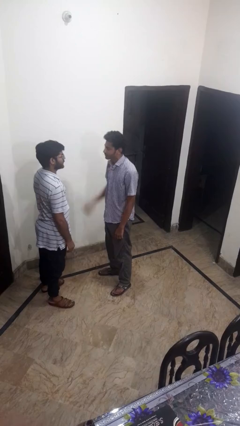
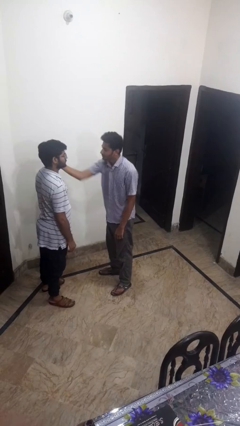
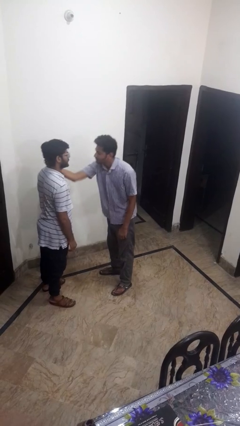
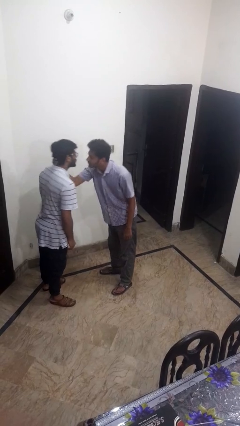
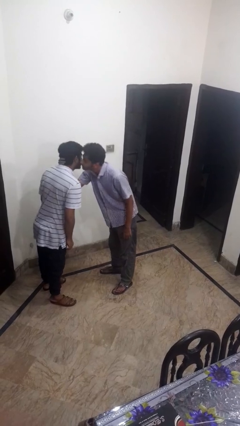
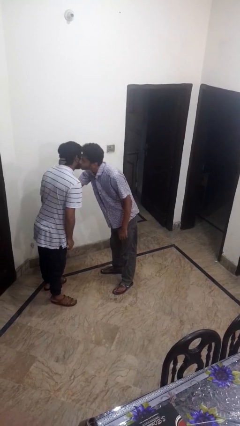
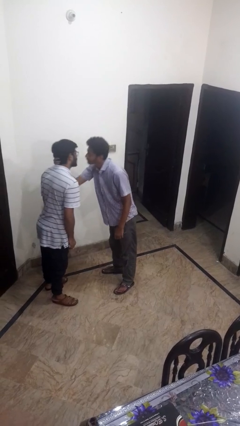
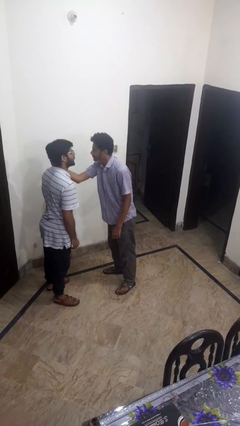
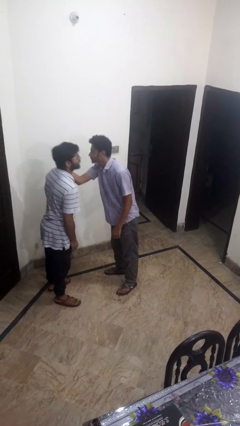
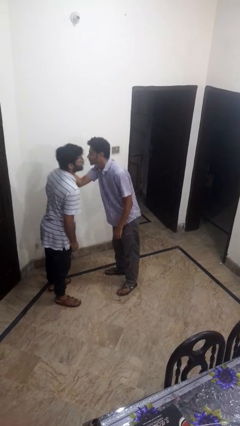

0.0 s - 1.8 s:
person grabs person by forearm

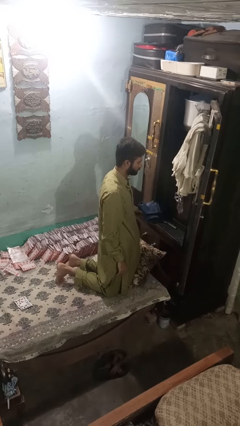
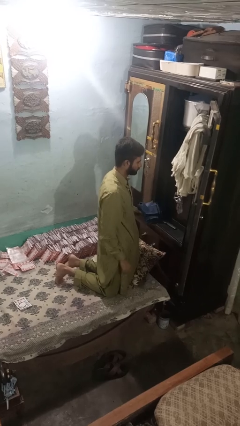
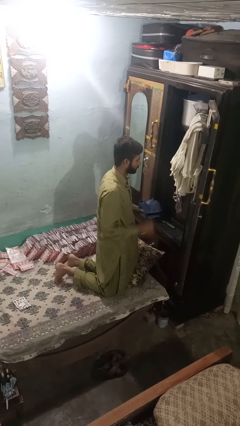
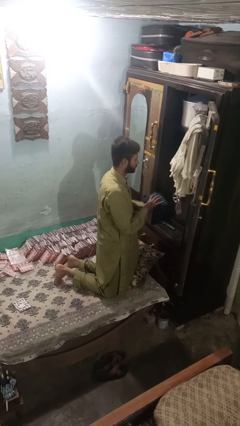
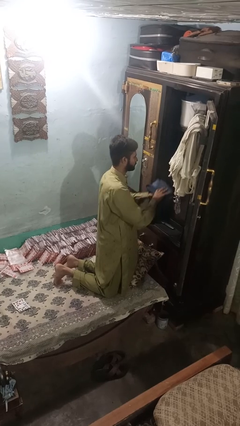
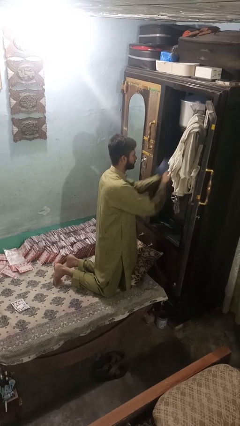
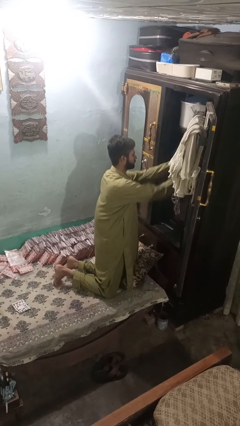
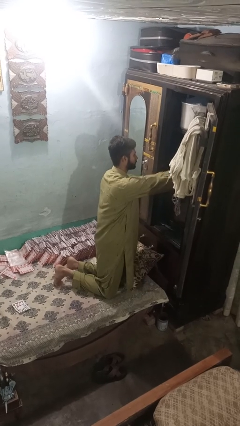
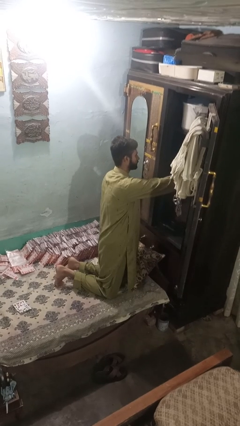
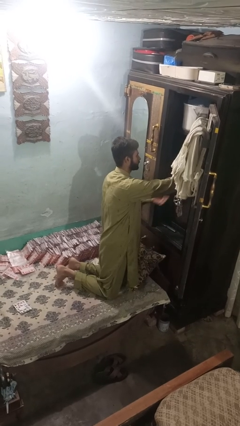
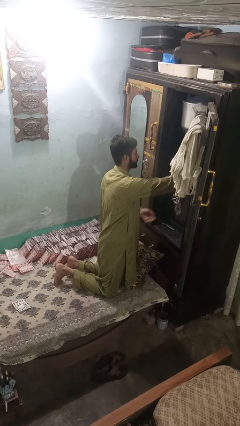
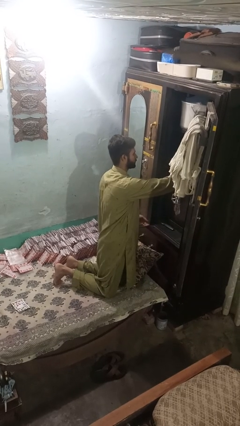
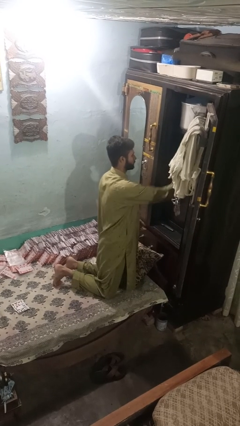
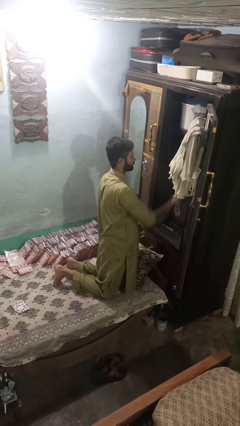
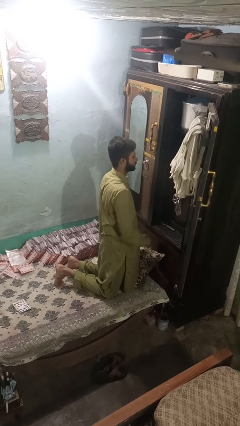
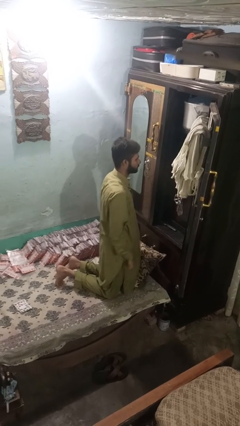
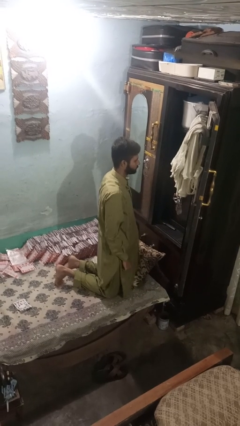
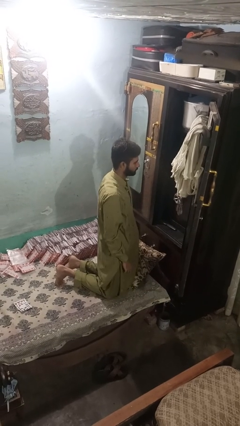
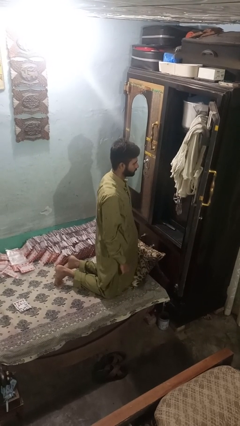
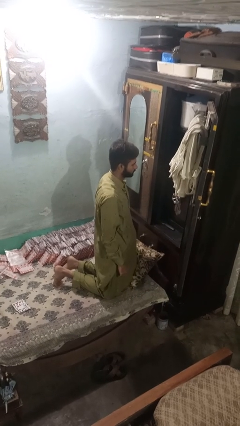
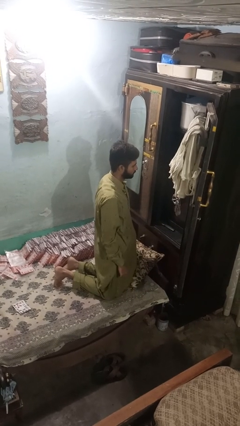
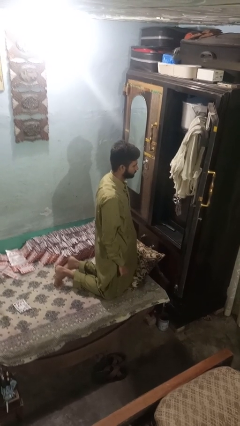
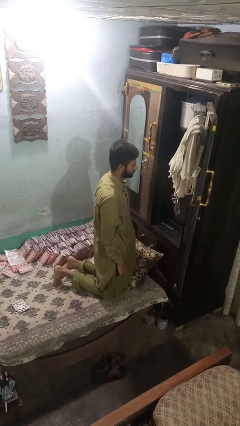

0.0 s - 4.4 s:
person puts clothes into dresser

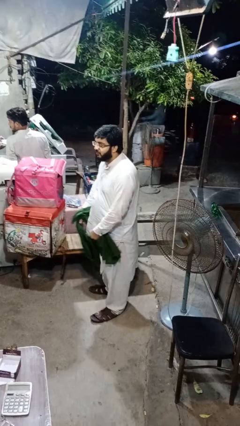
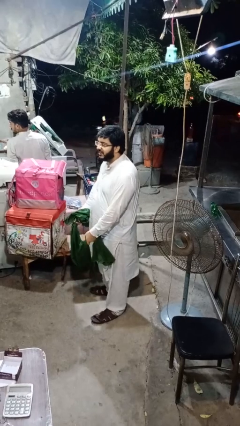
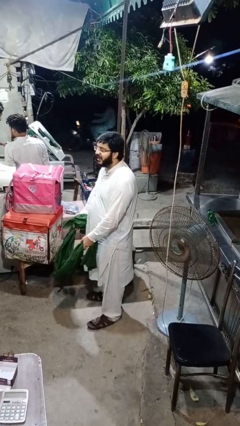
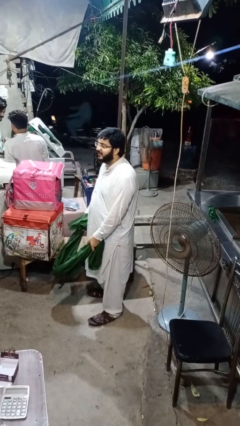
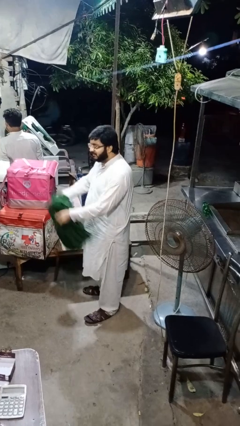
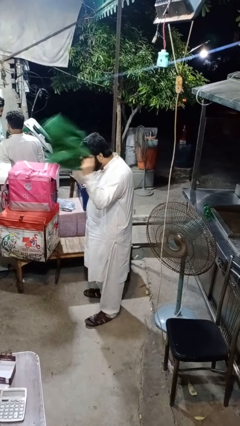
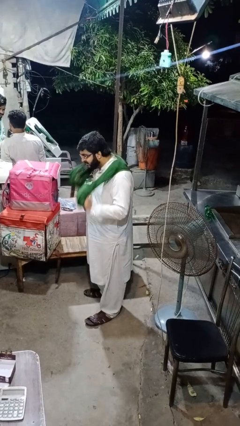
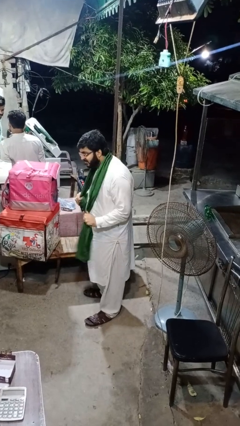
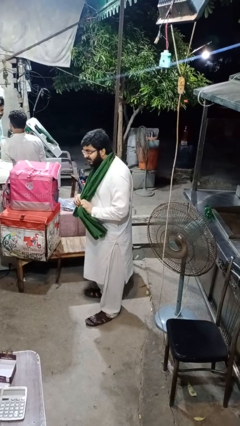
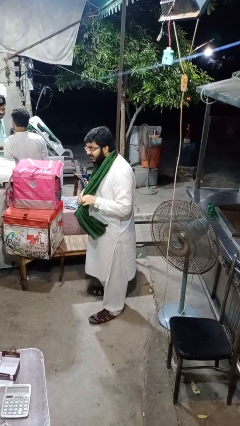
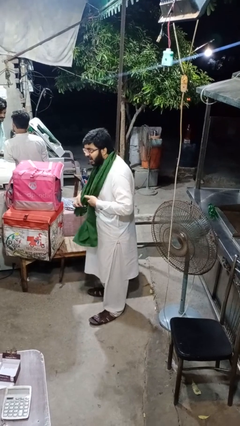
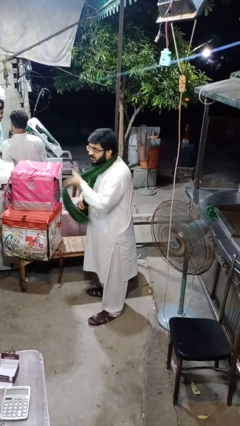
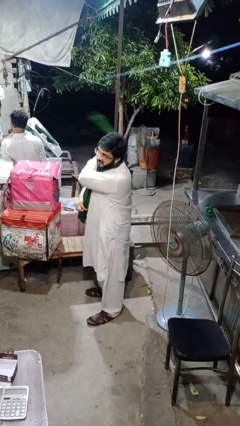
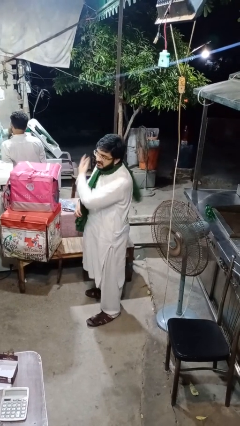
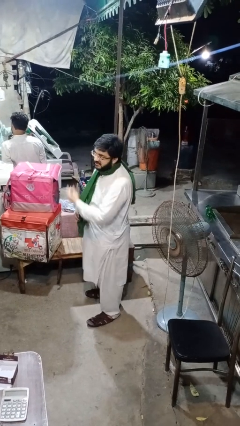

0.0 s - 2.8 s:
person puts on scarf

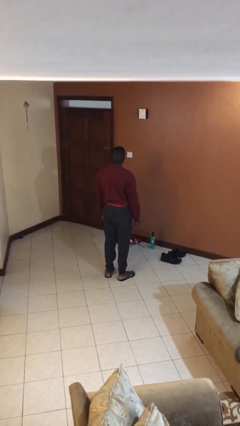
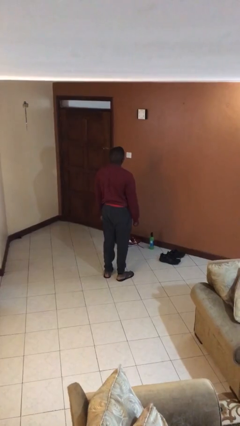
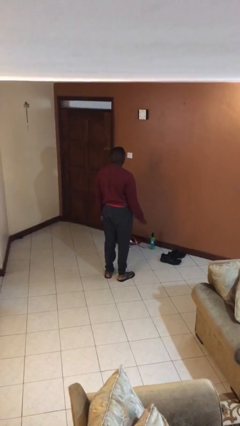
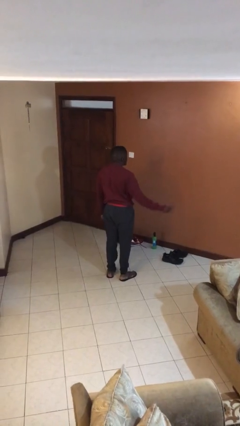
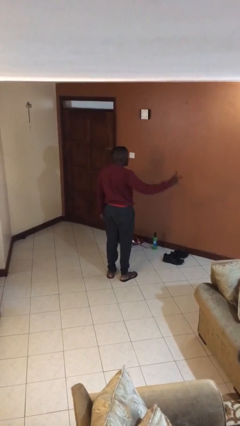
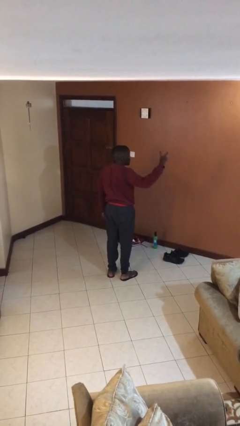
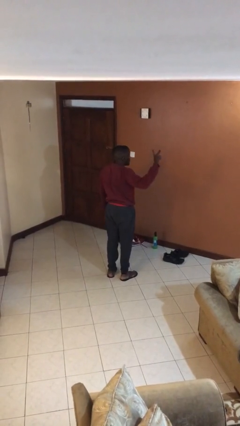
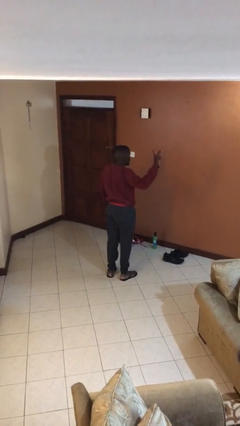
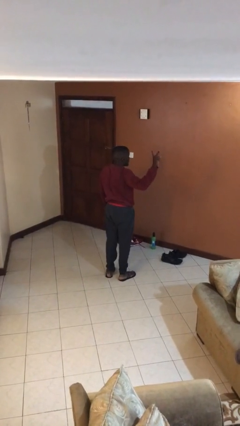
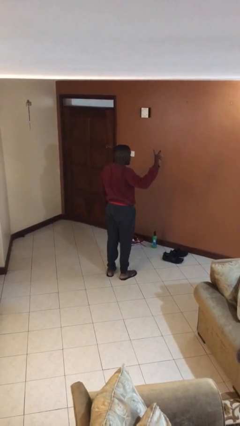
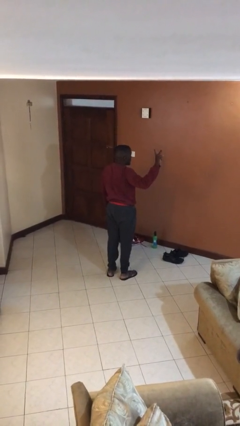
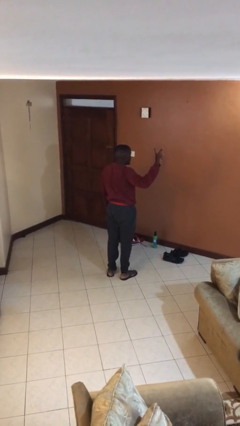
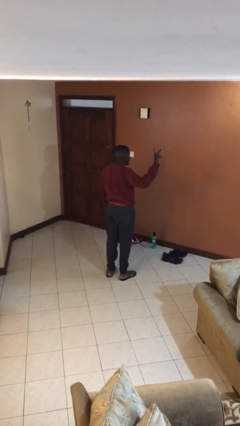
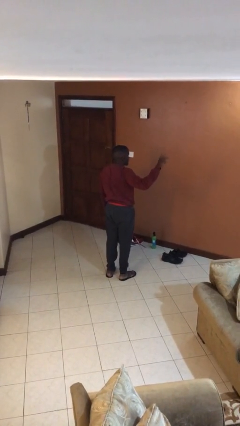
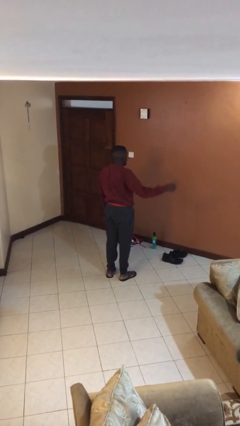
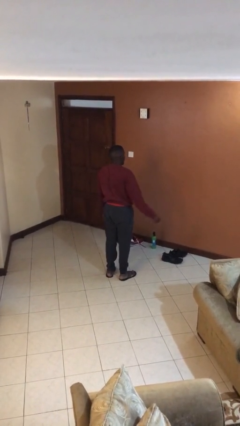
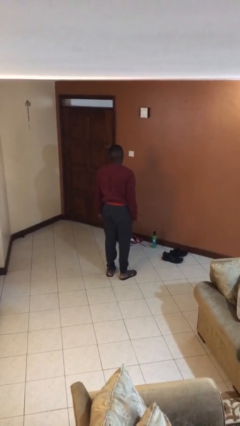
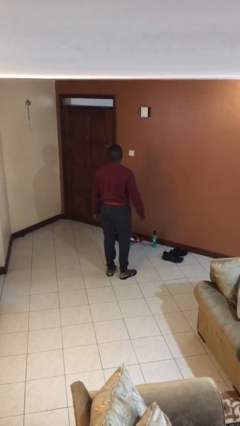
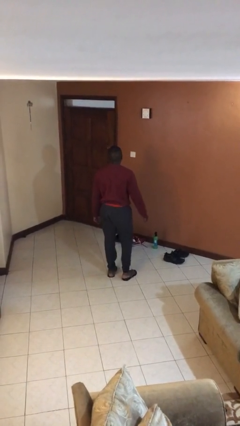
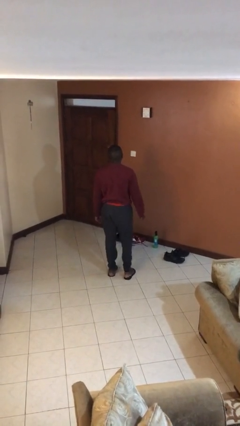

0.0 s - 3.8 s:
person gestures peace

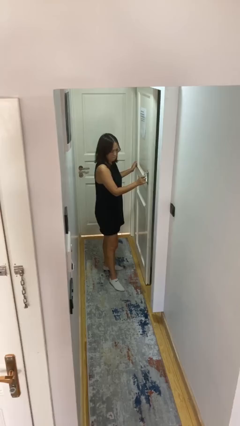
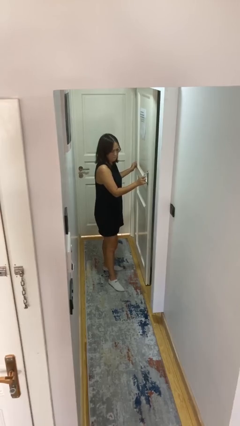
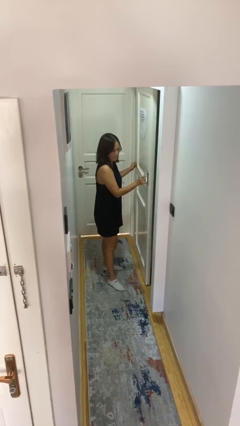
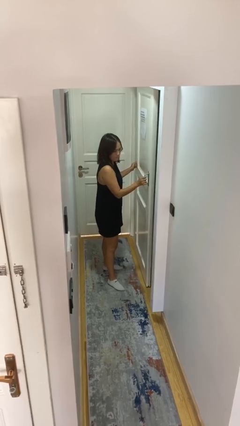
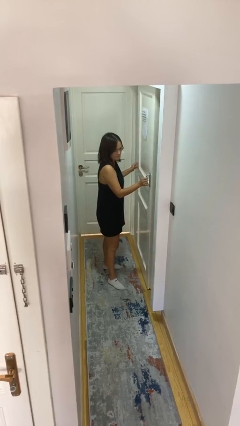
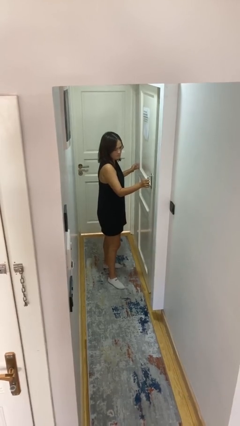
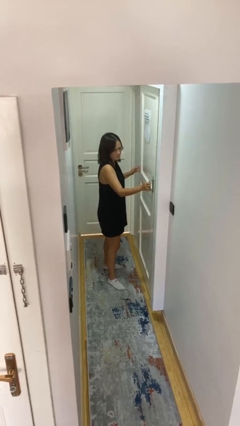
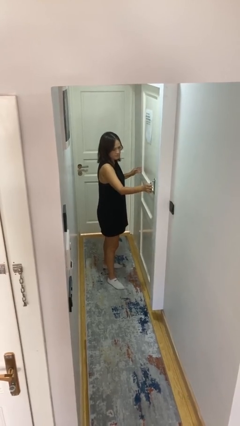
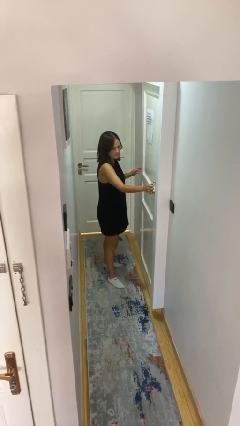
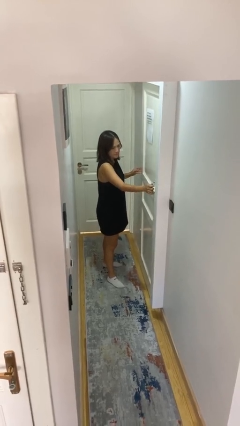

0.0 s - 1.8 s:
person closes sliding door

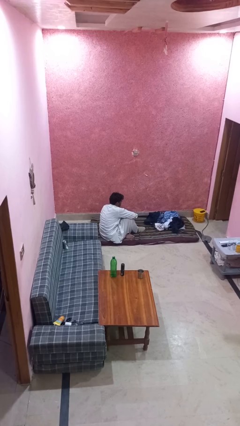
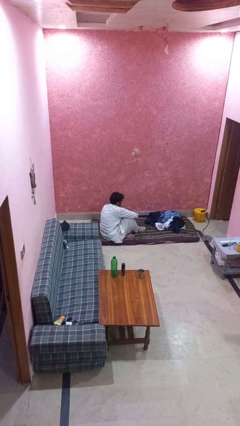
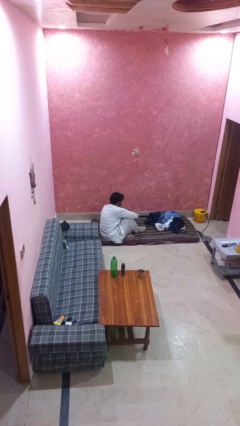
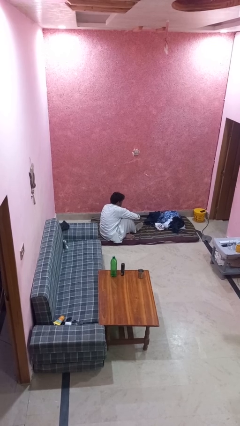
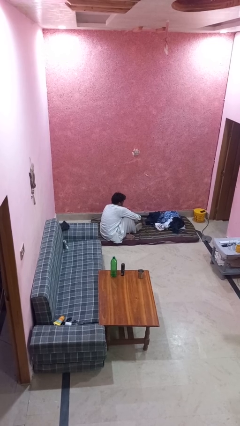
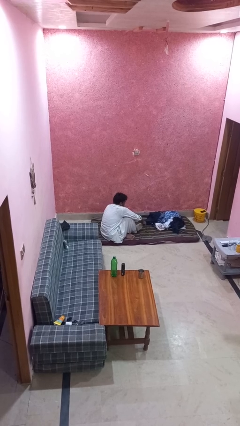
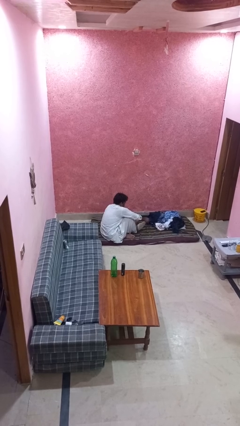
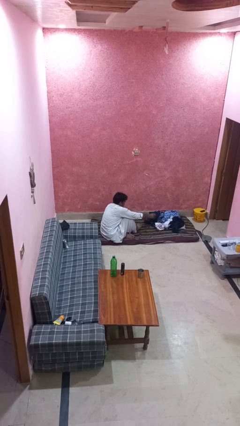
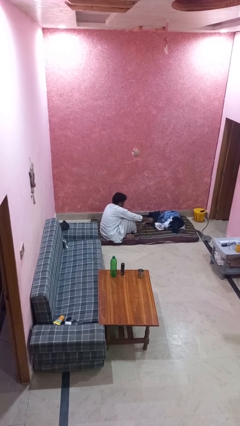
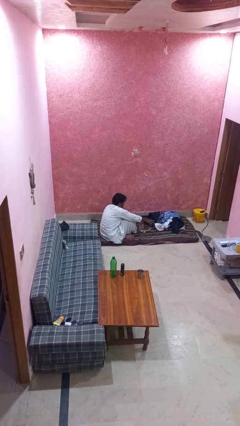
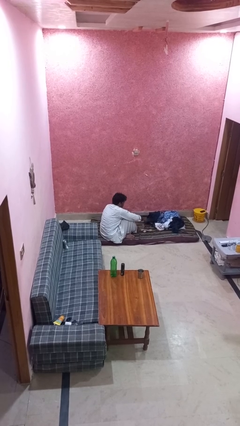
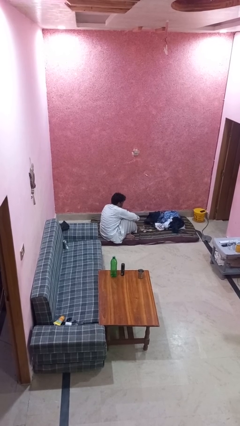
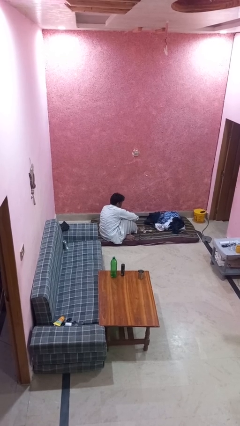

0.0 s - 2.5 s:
person takes off socks
